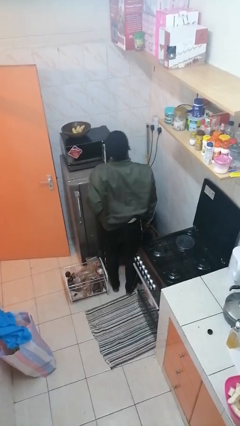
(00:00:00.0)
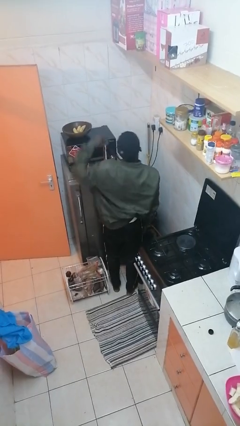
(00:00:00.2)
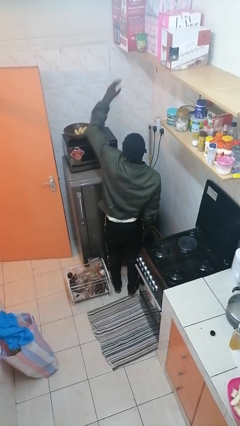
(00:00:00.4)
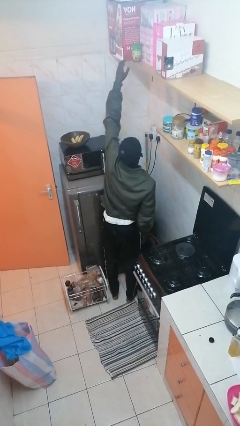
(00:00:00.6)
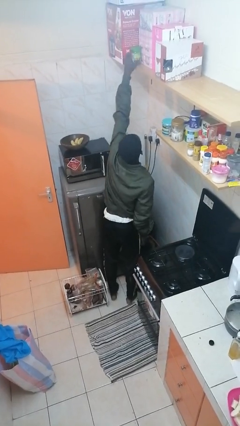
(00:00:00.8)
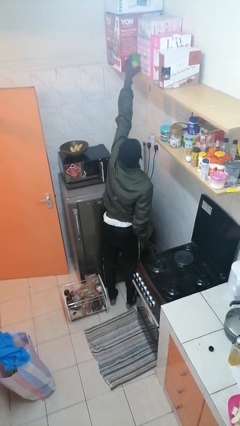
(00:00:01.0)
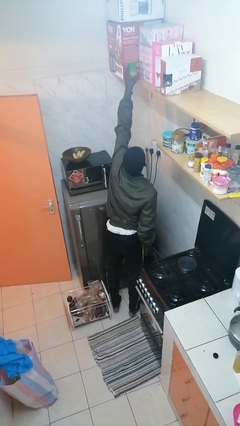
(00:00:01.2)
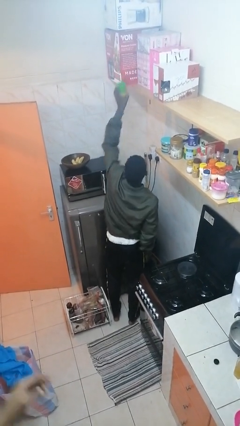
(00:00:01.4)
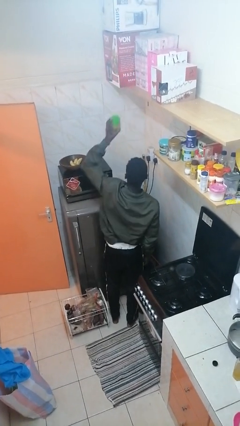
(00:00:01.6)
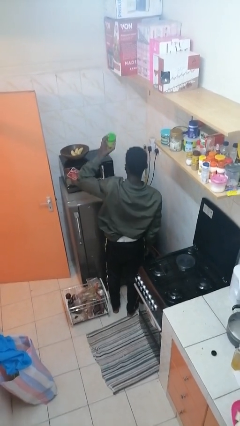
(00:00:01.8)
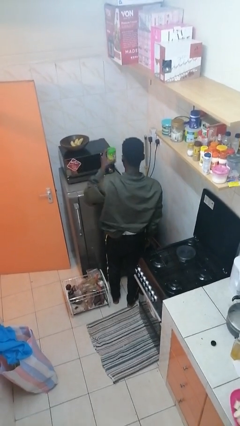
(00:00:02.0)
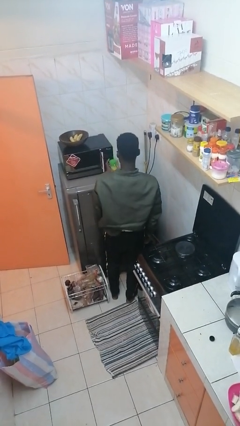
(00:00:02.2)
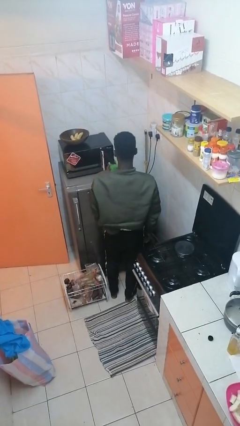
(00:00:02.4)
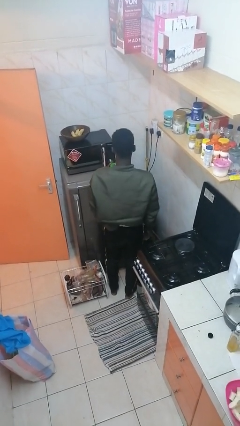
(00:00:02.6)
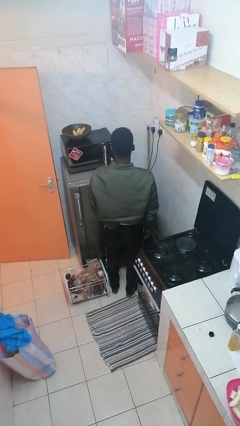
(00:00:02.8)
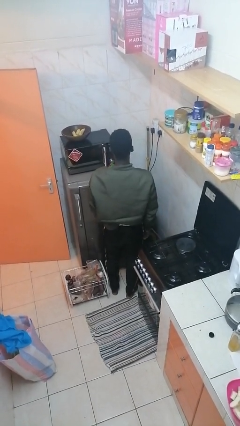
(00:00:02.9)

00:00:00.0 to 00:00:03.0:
person picks up object from shelf

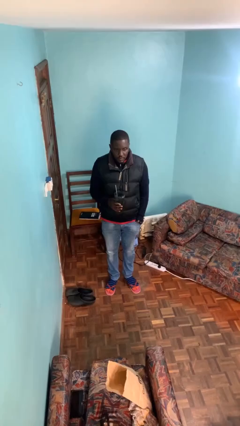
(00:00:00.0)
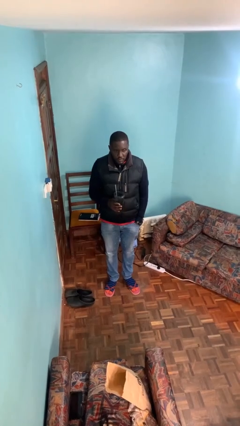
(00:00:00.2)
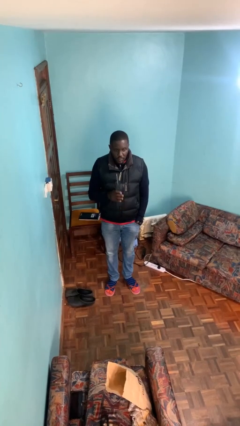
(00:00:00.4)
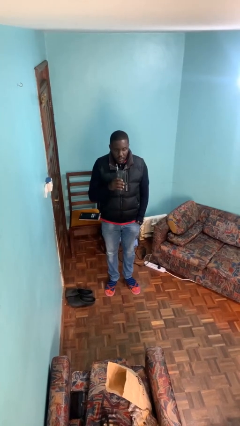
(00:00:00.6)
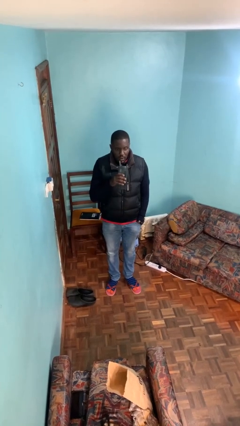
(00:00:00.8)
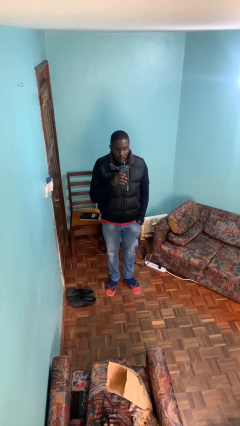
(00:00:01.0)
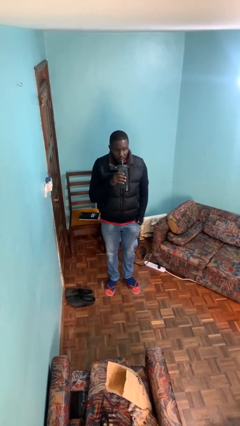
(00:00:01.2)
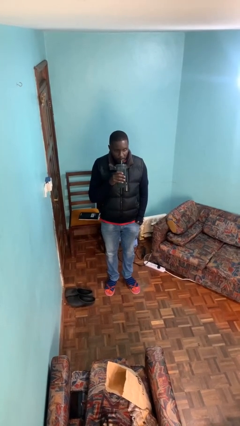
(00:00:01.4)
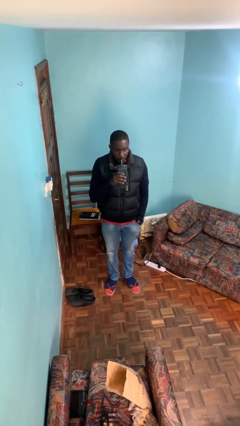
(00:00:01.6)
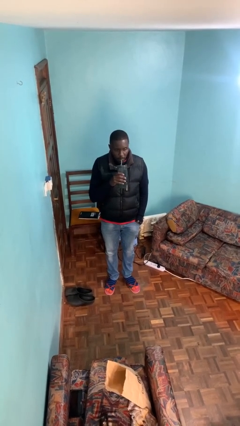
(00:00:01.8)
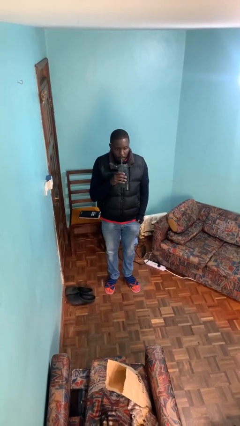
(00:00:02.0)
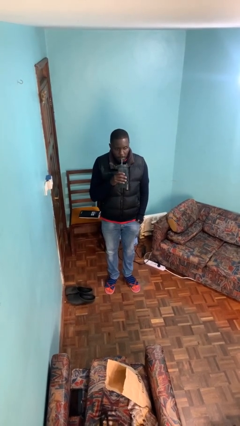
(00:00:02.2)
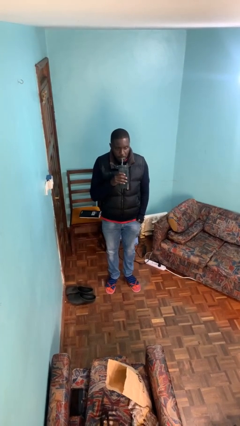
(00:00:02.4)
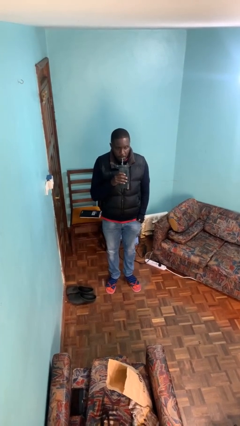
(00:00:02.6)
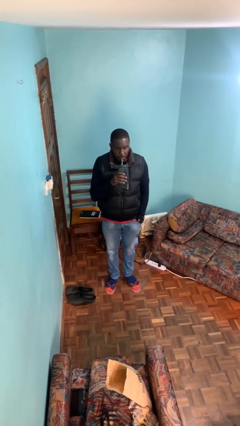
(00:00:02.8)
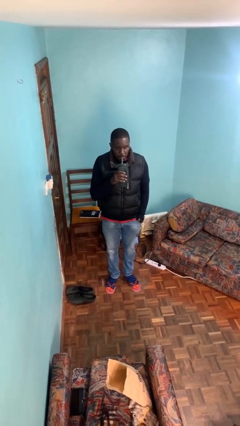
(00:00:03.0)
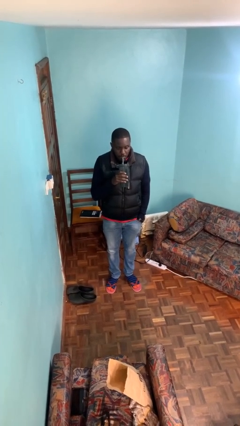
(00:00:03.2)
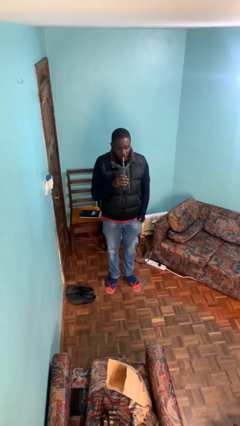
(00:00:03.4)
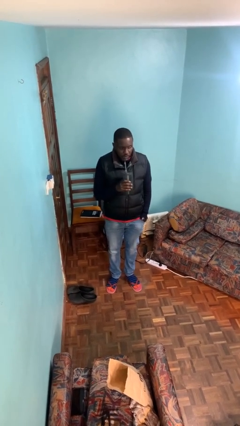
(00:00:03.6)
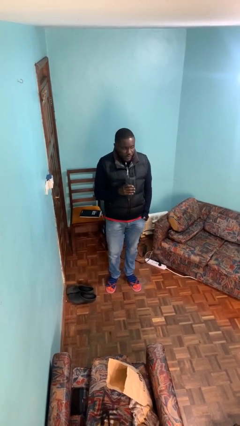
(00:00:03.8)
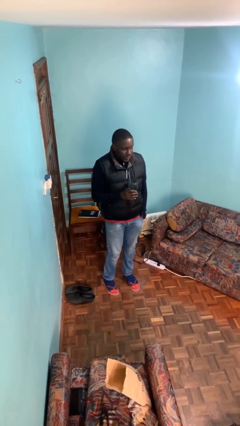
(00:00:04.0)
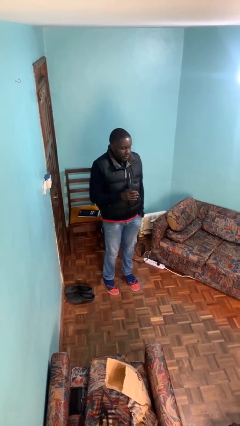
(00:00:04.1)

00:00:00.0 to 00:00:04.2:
person drinks from straw

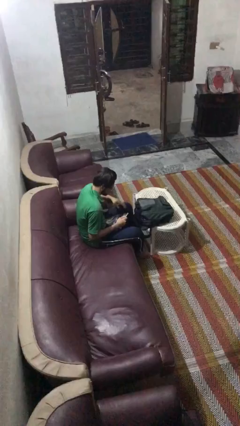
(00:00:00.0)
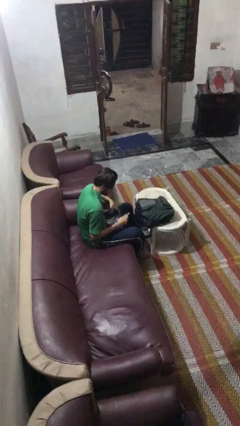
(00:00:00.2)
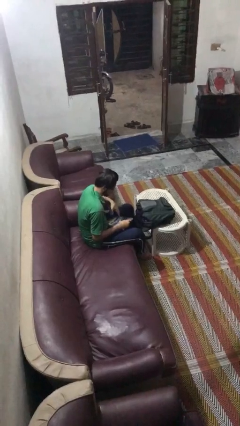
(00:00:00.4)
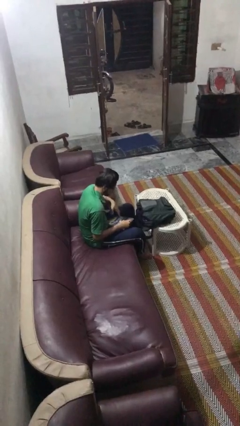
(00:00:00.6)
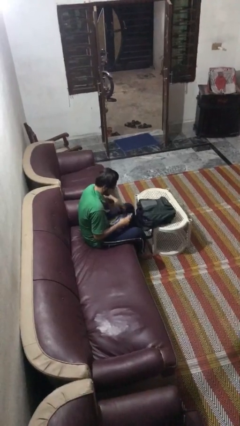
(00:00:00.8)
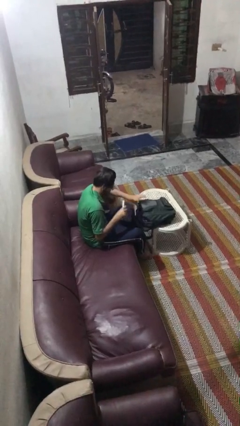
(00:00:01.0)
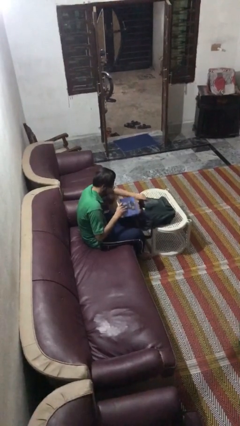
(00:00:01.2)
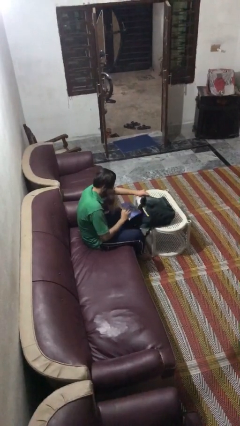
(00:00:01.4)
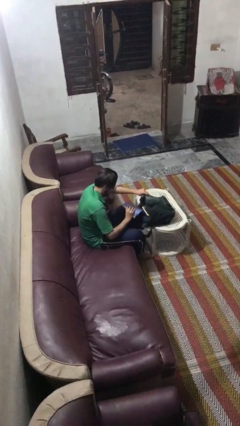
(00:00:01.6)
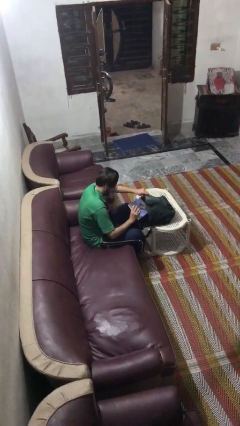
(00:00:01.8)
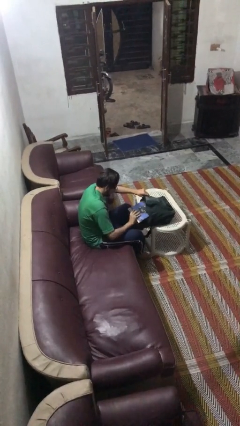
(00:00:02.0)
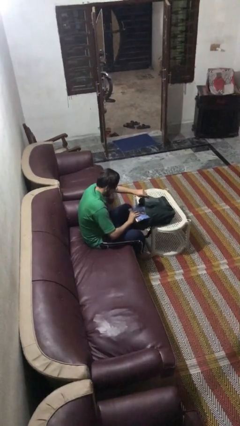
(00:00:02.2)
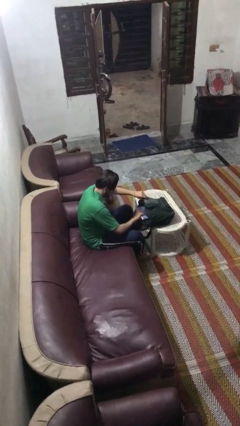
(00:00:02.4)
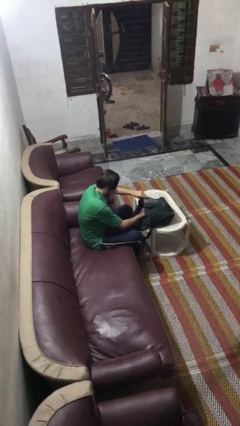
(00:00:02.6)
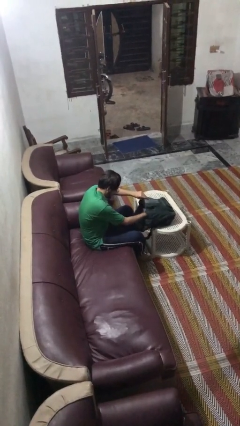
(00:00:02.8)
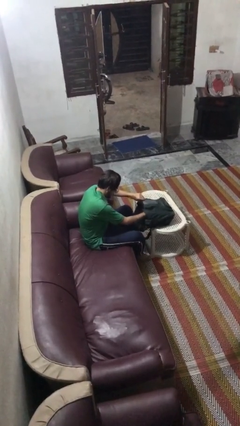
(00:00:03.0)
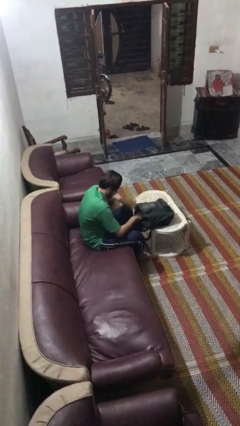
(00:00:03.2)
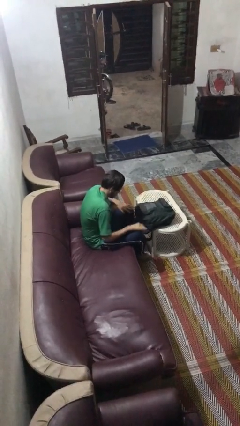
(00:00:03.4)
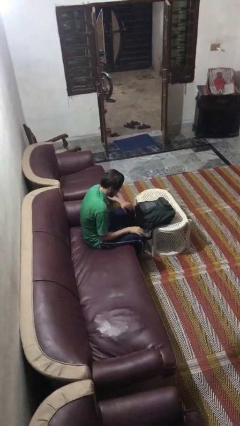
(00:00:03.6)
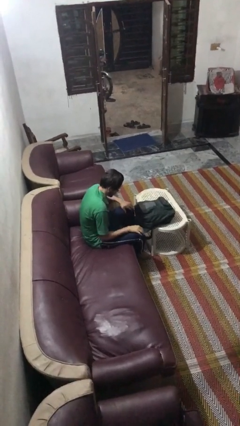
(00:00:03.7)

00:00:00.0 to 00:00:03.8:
person puts object into backpack

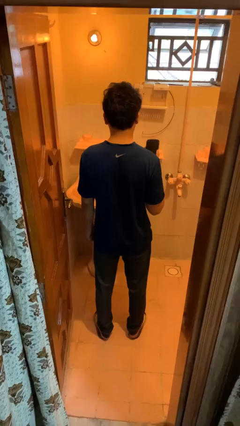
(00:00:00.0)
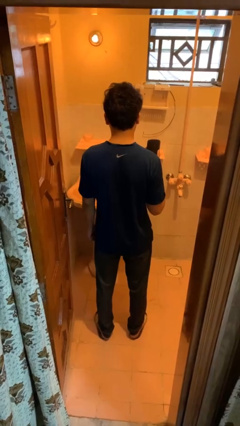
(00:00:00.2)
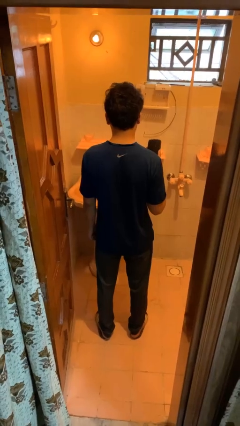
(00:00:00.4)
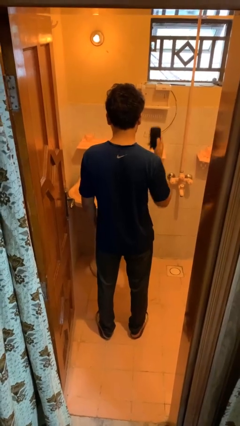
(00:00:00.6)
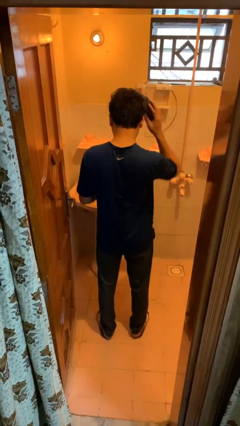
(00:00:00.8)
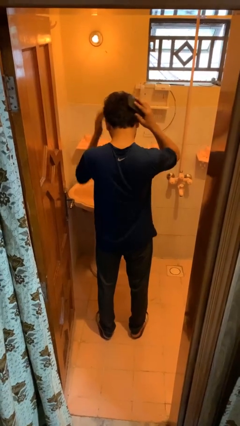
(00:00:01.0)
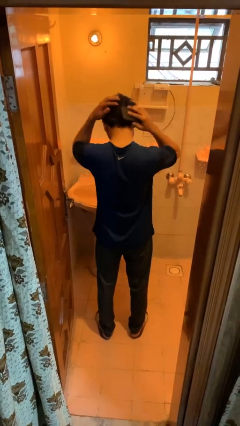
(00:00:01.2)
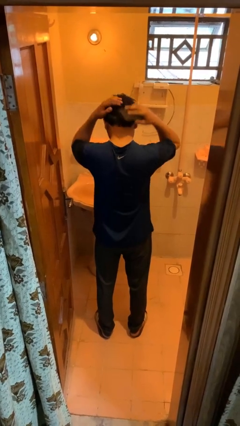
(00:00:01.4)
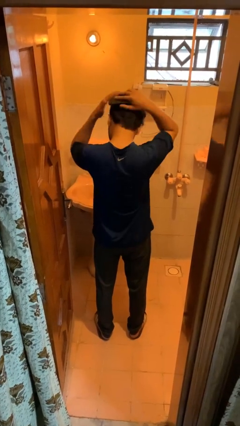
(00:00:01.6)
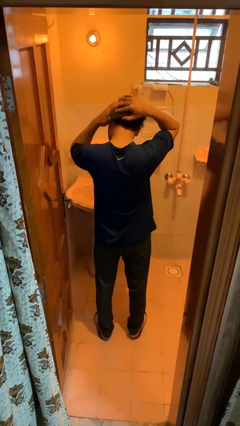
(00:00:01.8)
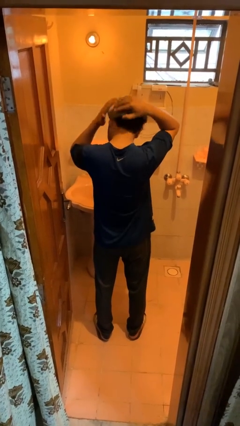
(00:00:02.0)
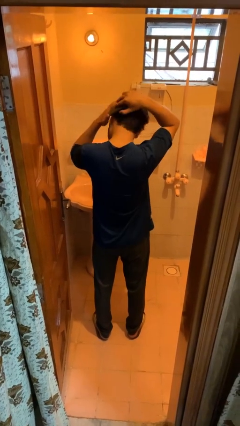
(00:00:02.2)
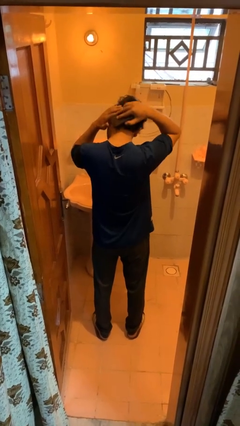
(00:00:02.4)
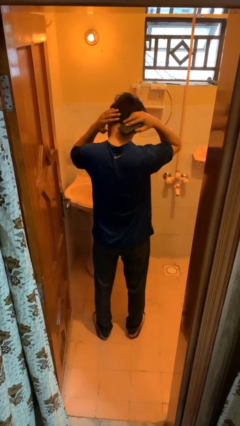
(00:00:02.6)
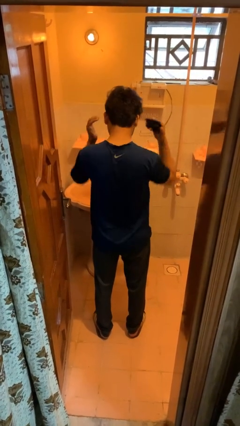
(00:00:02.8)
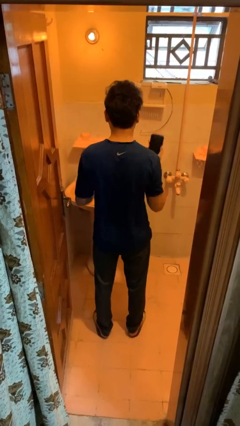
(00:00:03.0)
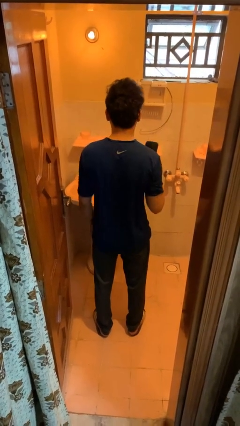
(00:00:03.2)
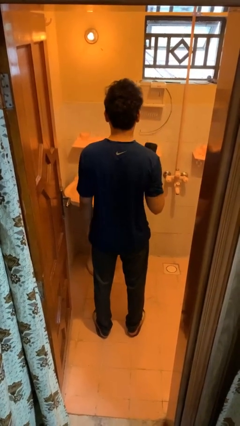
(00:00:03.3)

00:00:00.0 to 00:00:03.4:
person brushes hair

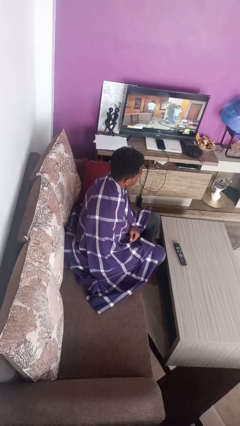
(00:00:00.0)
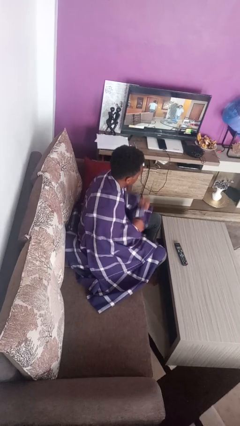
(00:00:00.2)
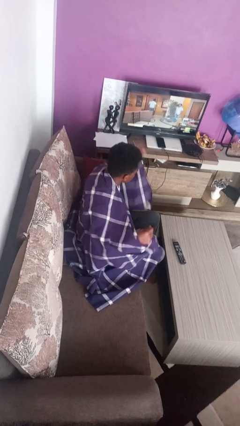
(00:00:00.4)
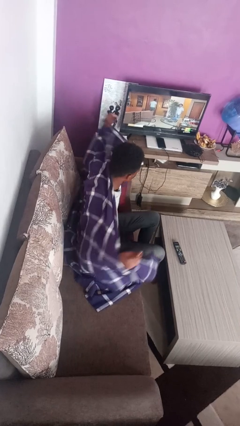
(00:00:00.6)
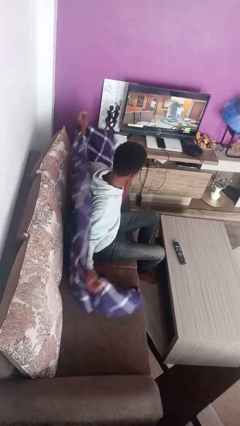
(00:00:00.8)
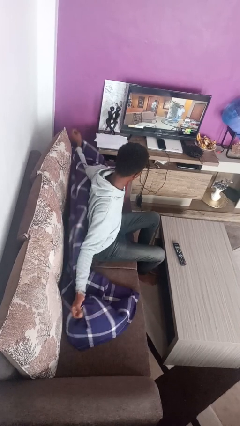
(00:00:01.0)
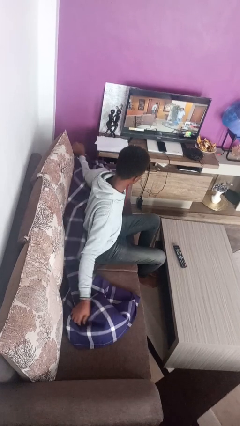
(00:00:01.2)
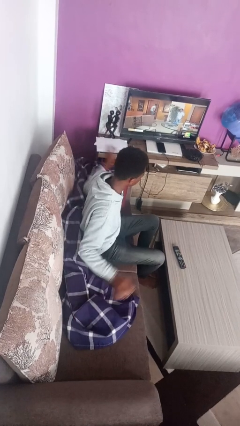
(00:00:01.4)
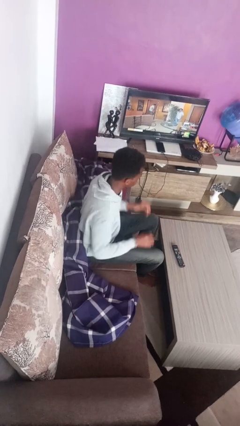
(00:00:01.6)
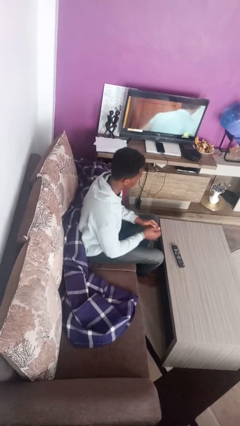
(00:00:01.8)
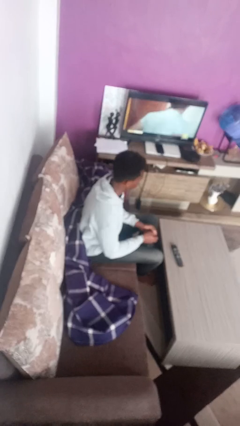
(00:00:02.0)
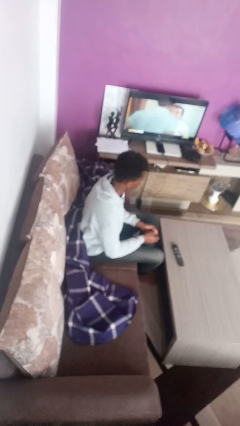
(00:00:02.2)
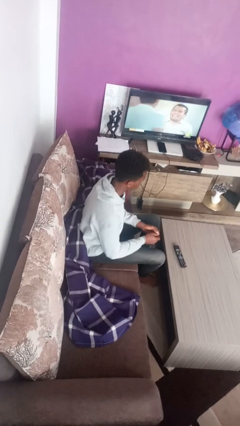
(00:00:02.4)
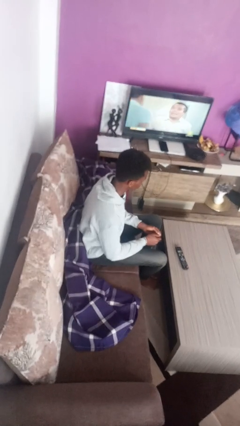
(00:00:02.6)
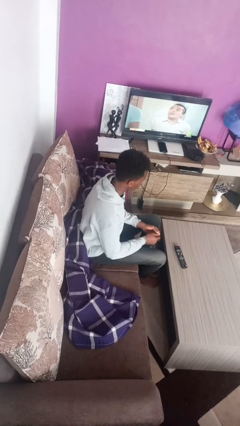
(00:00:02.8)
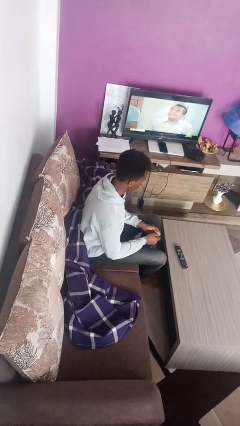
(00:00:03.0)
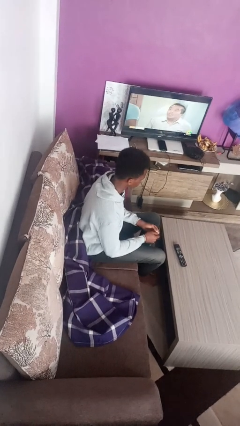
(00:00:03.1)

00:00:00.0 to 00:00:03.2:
person uncovers with blanket
